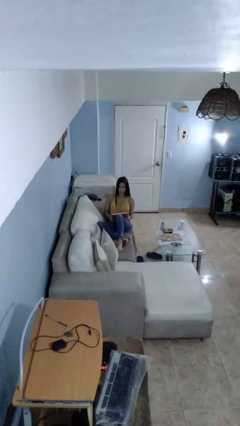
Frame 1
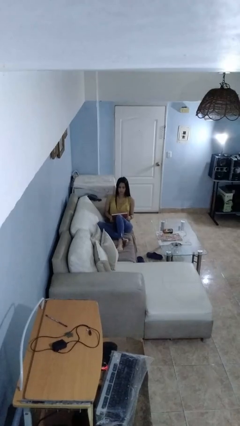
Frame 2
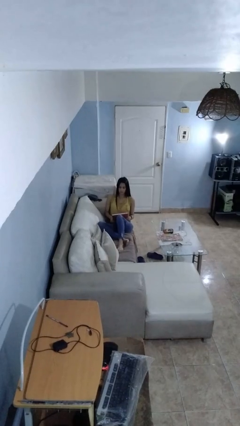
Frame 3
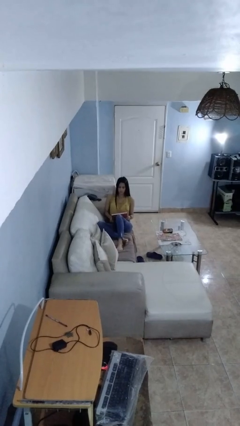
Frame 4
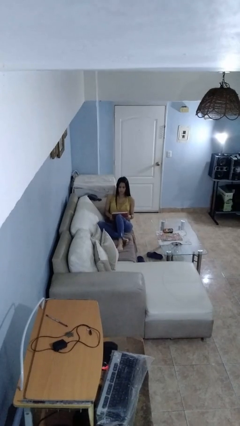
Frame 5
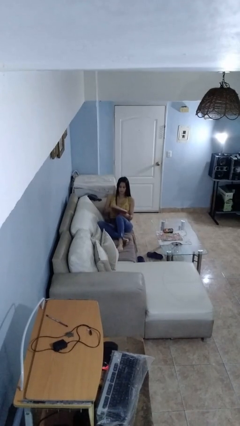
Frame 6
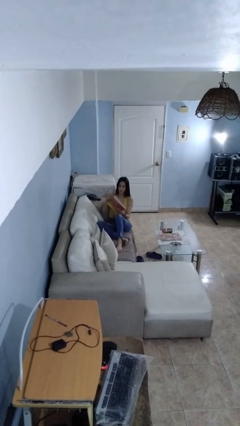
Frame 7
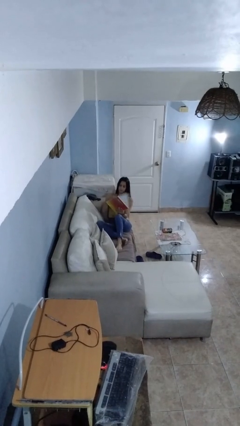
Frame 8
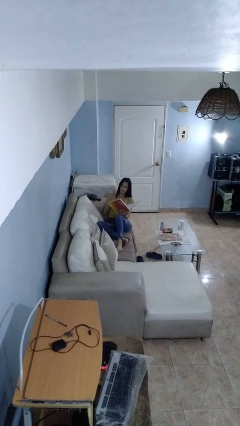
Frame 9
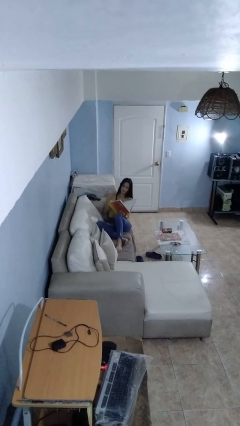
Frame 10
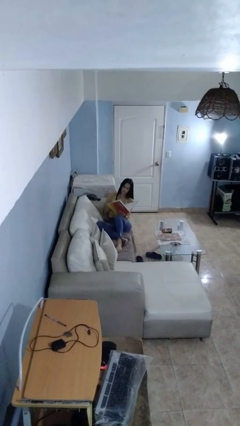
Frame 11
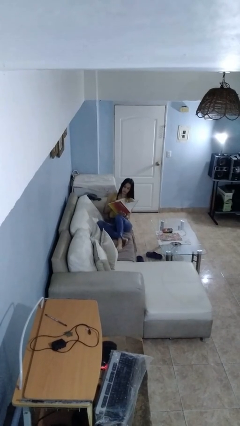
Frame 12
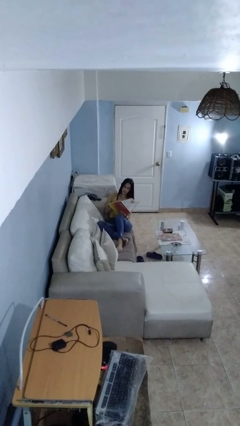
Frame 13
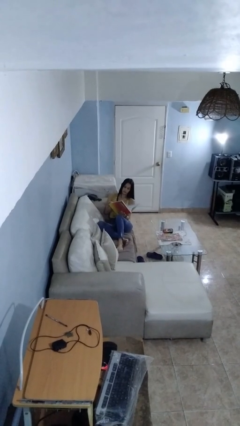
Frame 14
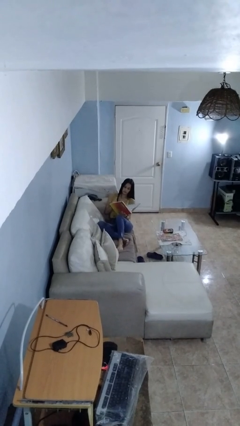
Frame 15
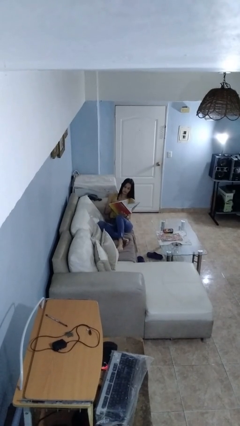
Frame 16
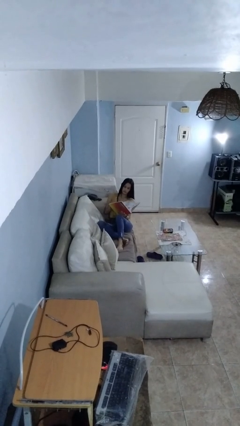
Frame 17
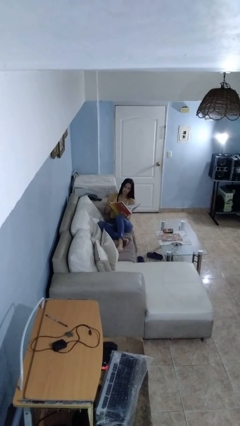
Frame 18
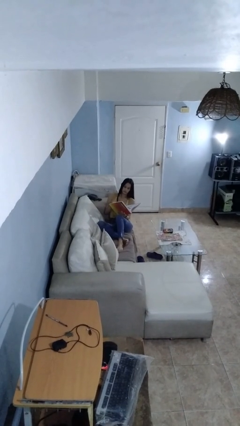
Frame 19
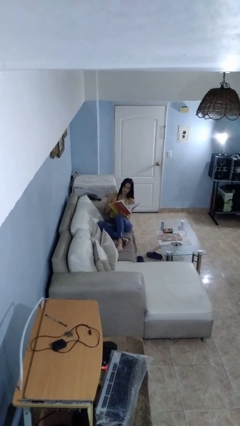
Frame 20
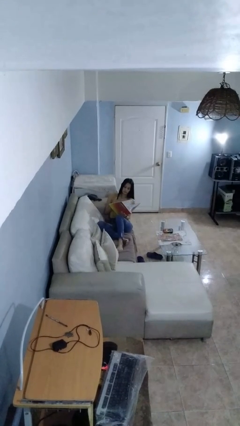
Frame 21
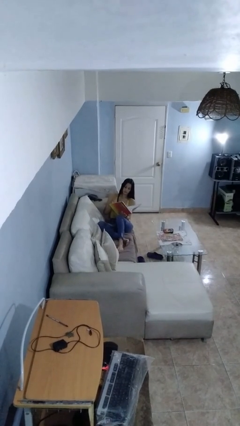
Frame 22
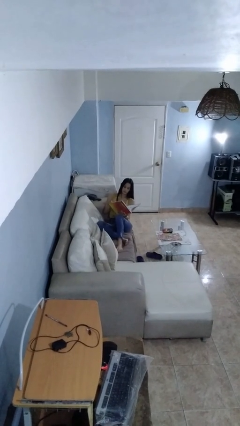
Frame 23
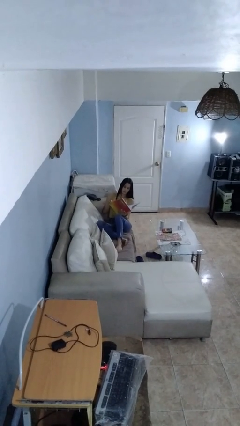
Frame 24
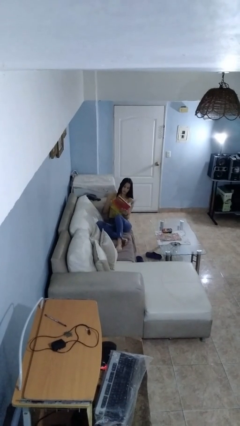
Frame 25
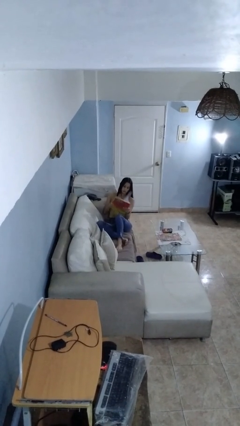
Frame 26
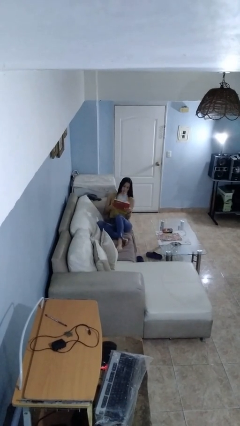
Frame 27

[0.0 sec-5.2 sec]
person reads book

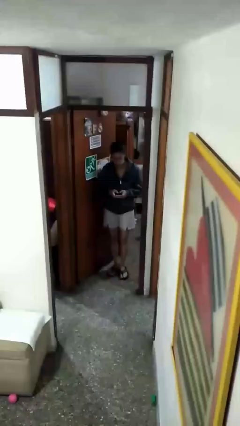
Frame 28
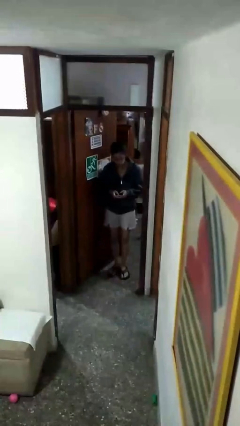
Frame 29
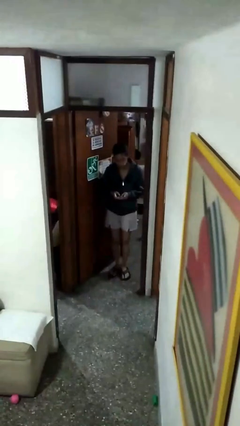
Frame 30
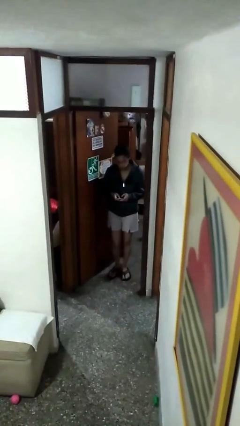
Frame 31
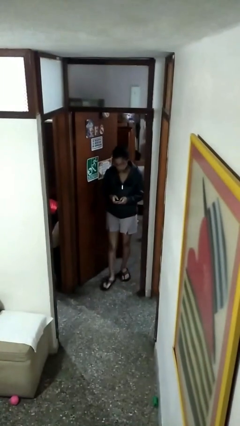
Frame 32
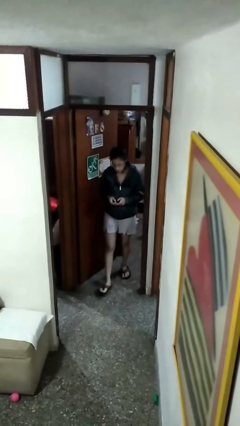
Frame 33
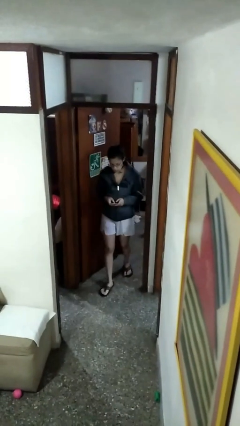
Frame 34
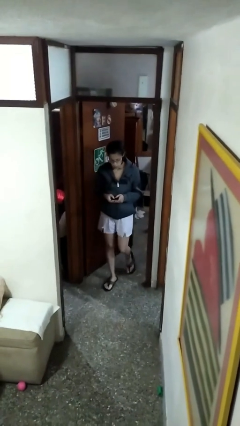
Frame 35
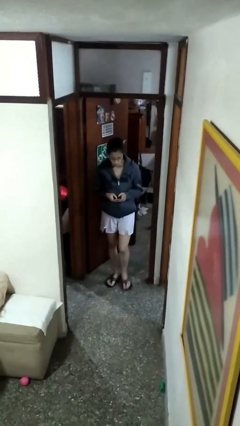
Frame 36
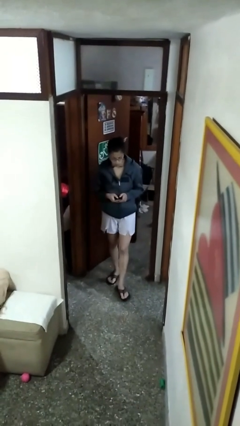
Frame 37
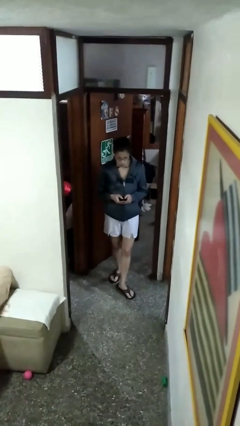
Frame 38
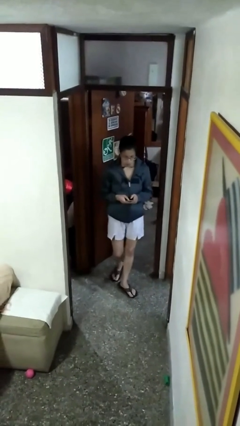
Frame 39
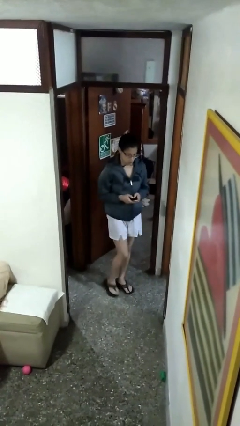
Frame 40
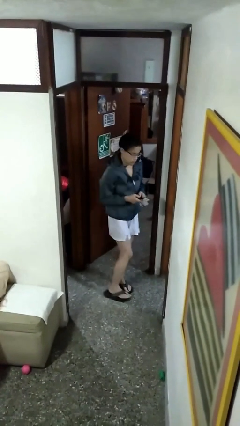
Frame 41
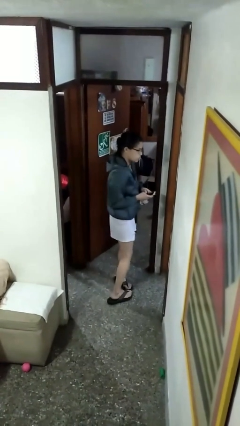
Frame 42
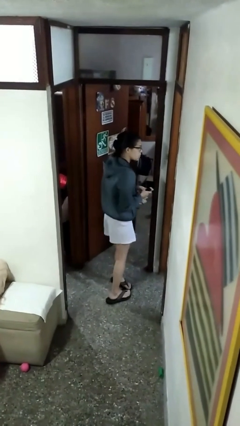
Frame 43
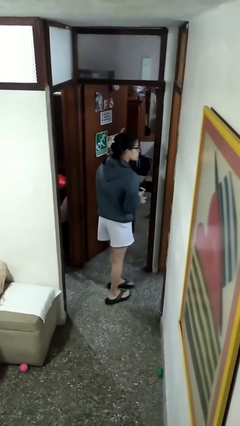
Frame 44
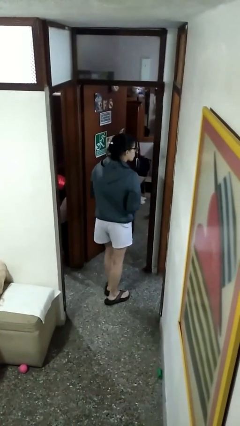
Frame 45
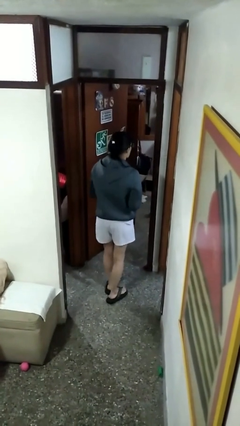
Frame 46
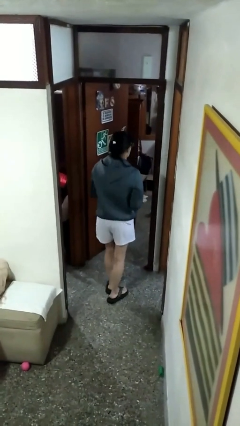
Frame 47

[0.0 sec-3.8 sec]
person enters scene through structure

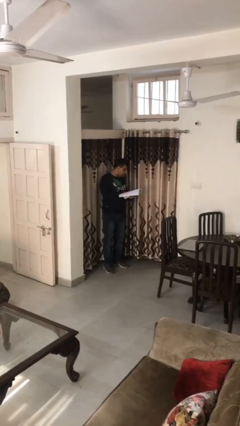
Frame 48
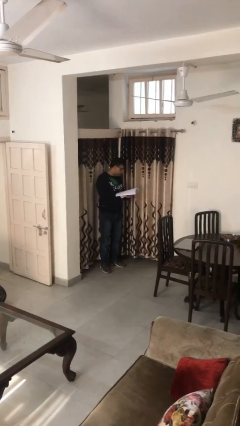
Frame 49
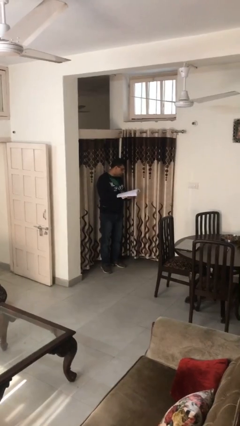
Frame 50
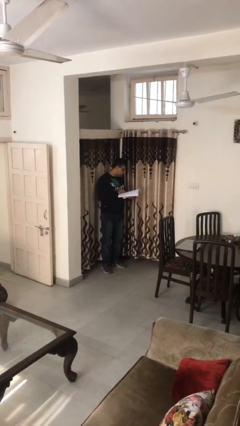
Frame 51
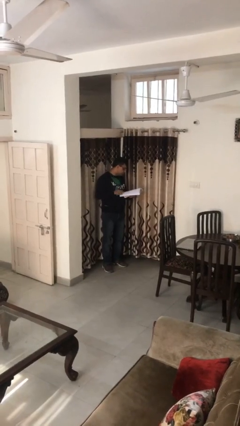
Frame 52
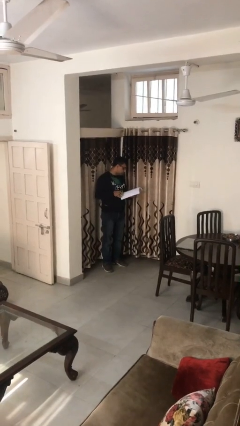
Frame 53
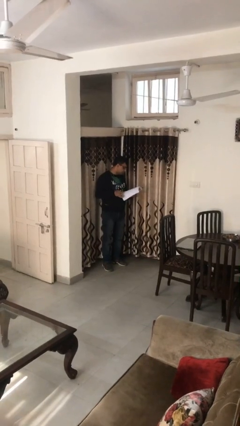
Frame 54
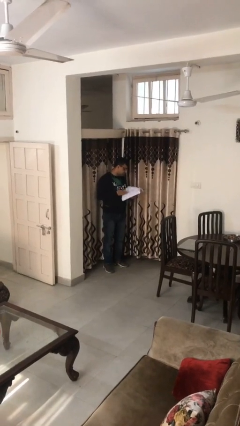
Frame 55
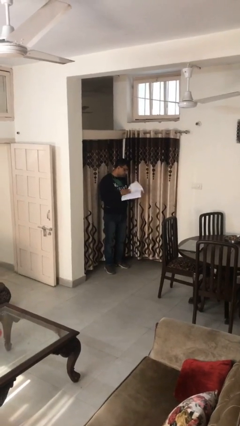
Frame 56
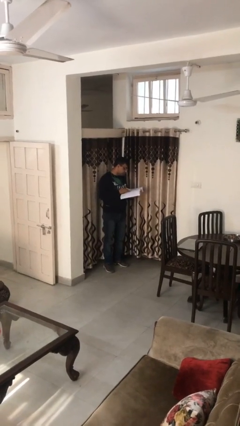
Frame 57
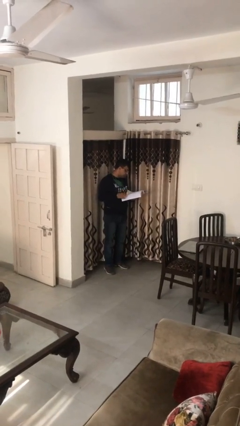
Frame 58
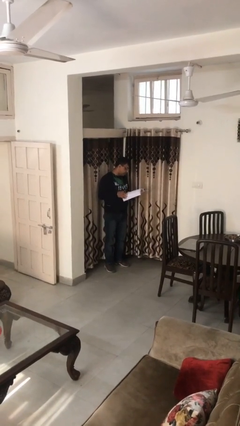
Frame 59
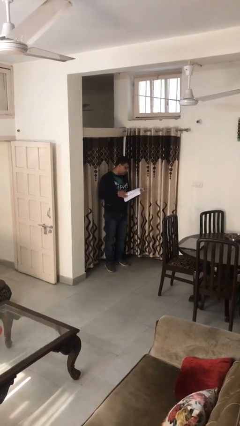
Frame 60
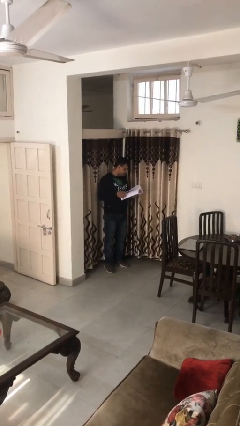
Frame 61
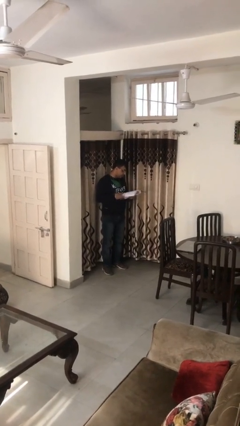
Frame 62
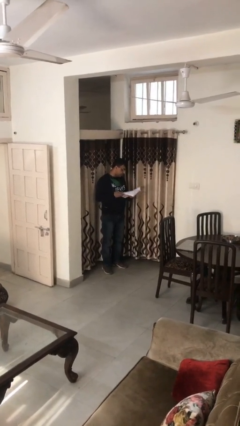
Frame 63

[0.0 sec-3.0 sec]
person reads document

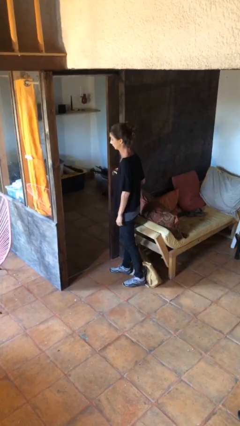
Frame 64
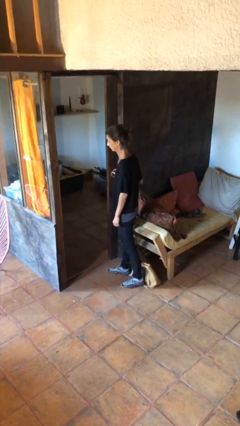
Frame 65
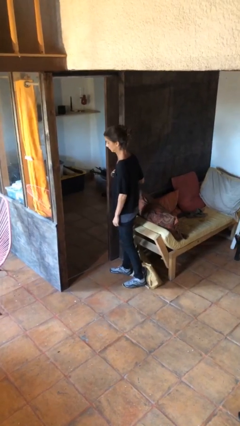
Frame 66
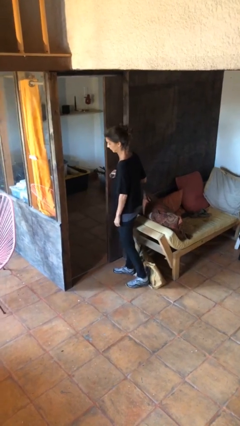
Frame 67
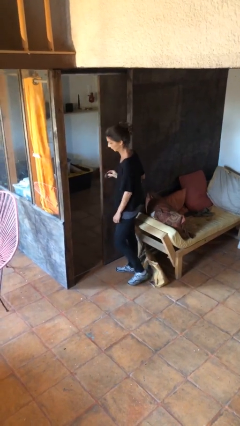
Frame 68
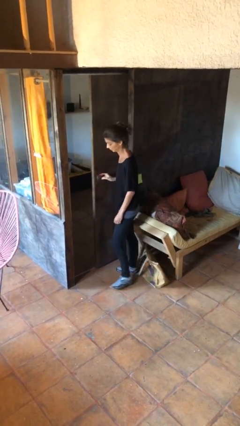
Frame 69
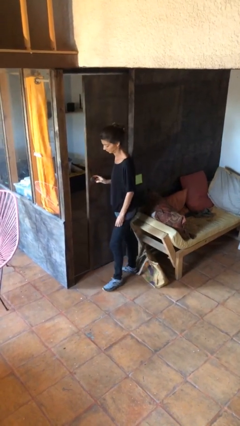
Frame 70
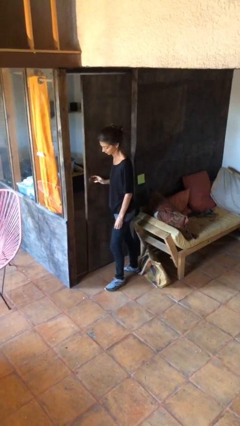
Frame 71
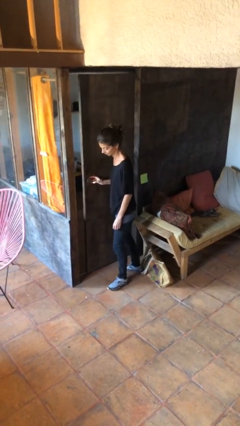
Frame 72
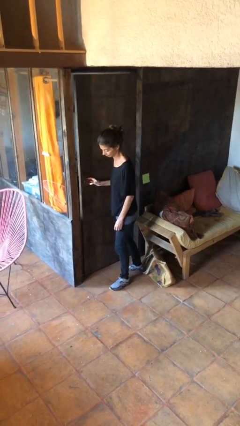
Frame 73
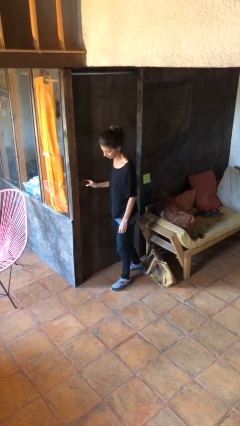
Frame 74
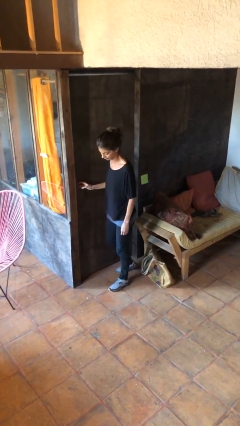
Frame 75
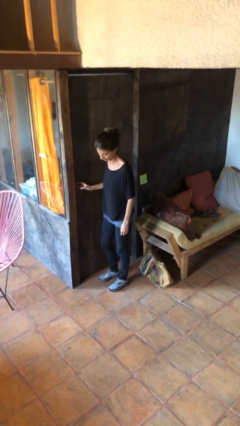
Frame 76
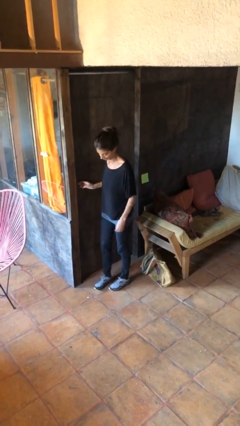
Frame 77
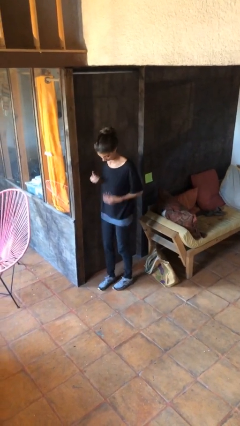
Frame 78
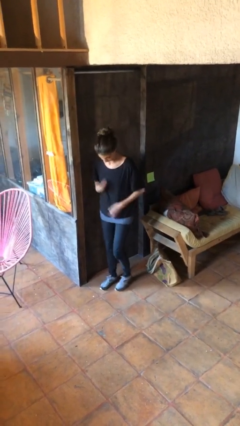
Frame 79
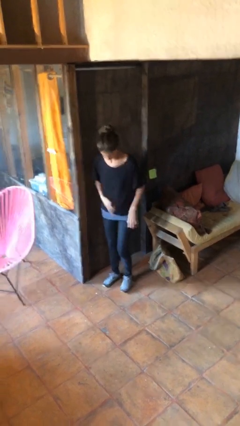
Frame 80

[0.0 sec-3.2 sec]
person closes sliding door

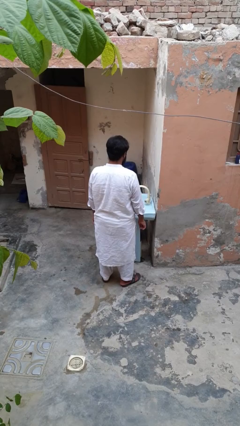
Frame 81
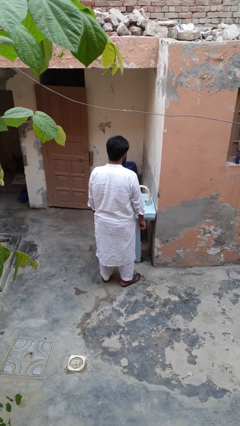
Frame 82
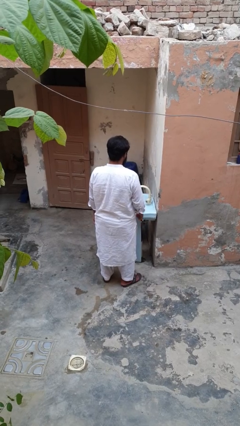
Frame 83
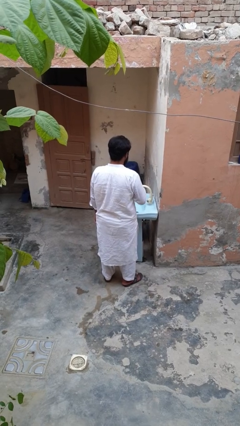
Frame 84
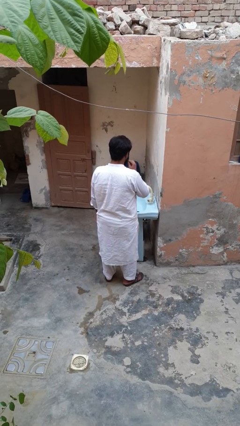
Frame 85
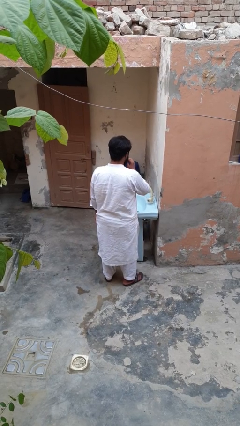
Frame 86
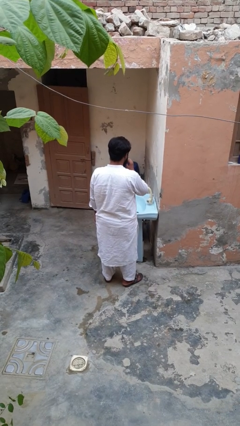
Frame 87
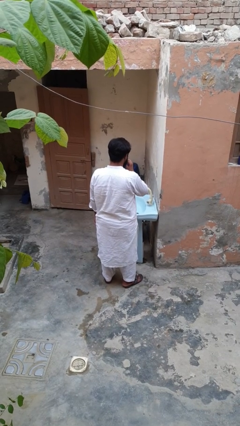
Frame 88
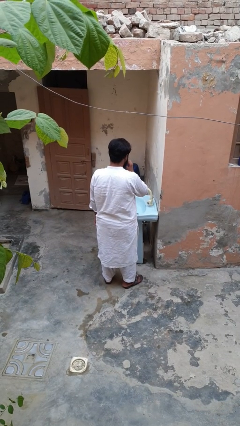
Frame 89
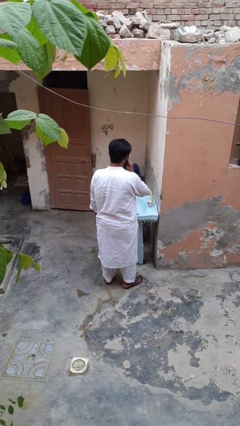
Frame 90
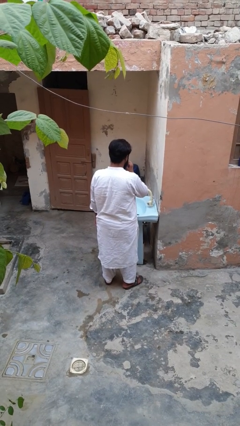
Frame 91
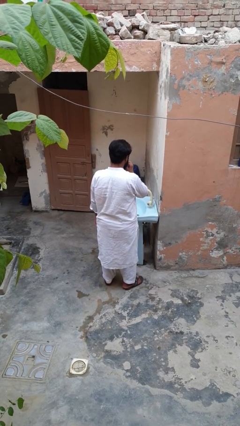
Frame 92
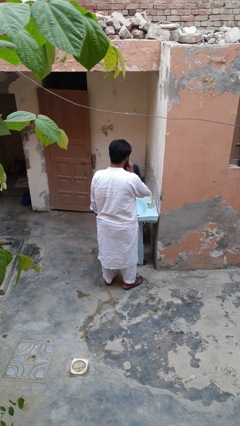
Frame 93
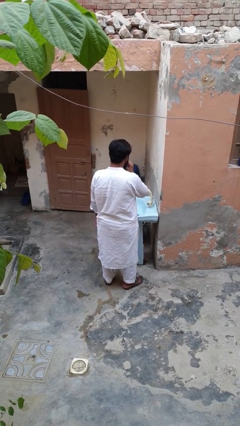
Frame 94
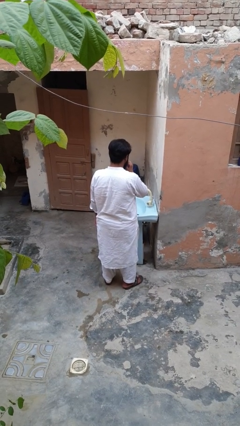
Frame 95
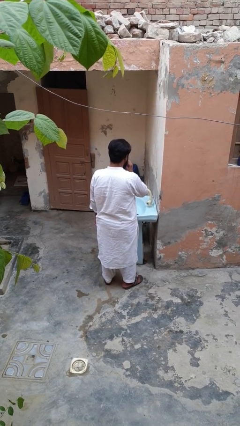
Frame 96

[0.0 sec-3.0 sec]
person flosses
